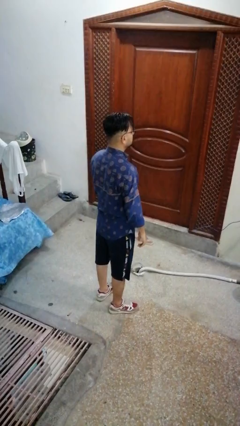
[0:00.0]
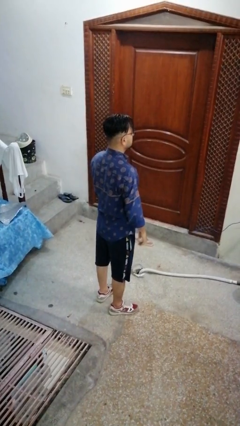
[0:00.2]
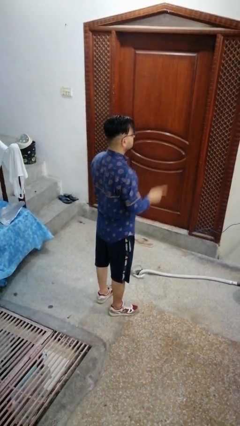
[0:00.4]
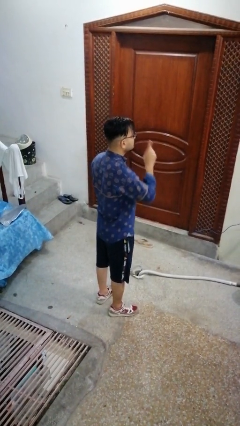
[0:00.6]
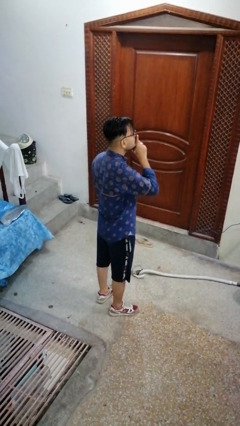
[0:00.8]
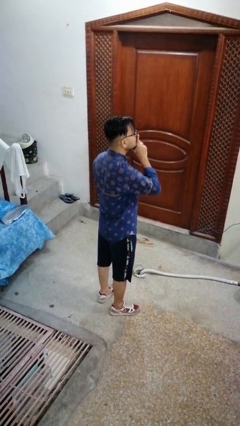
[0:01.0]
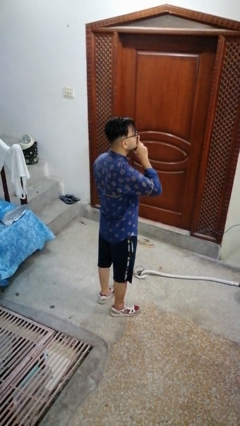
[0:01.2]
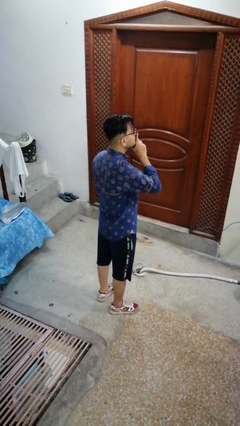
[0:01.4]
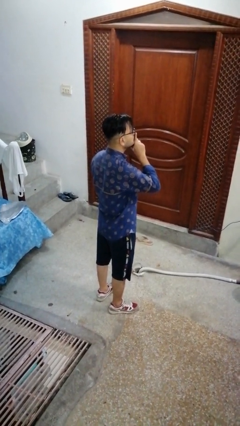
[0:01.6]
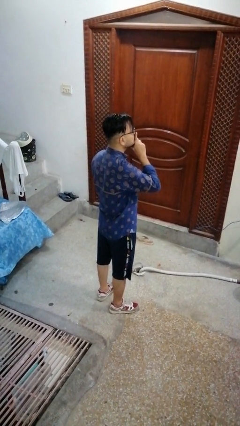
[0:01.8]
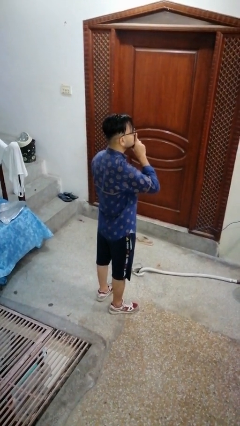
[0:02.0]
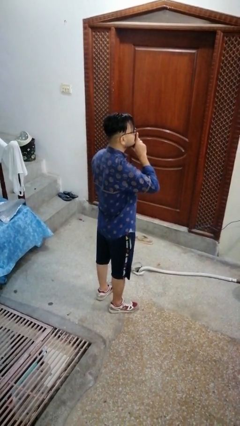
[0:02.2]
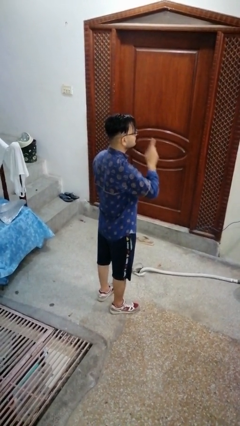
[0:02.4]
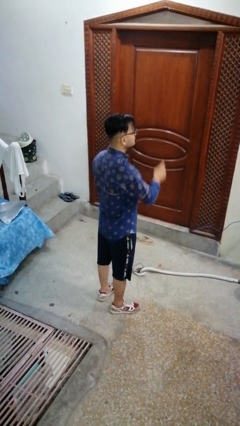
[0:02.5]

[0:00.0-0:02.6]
person gestures be quiet

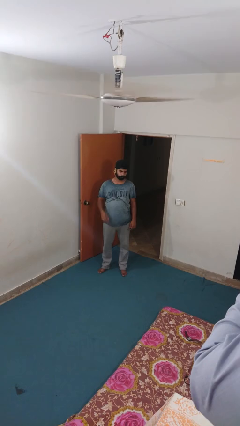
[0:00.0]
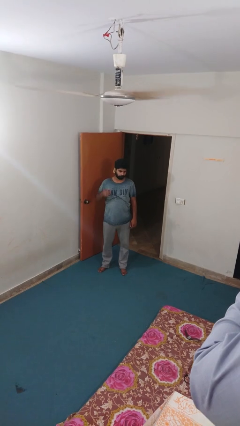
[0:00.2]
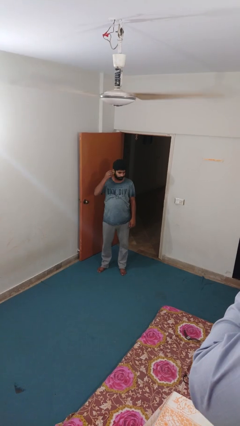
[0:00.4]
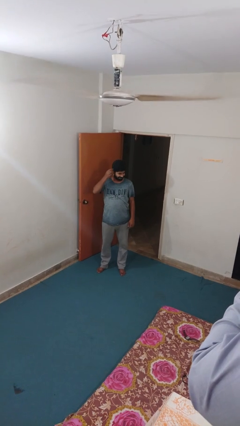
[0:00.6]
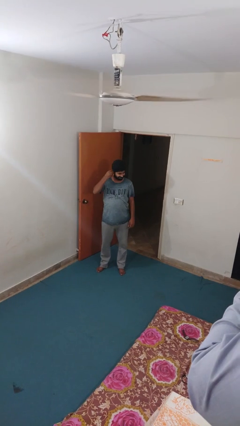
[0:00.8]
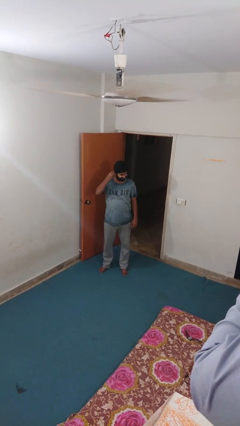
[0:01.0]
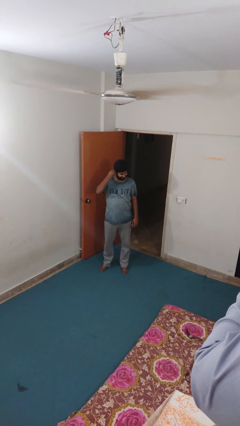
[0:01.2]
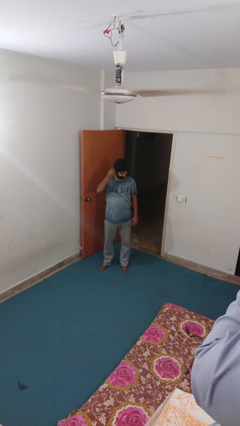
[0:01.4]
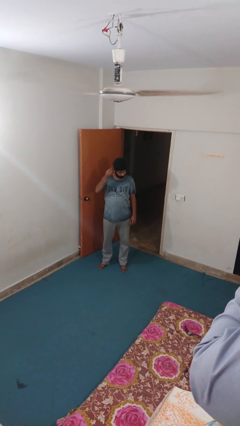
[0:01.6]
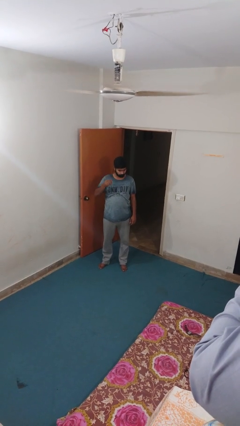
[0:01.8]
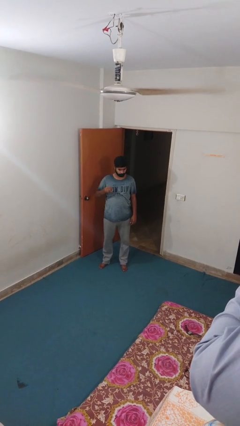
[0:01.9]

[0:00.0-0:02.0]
person takes off earrings

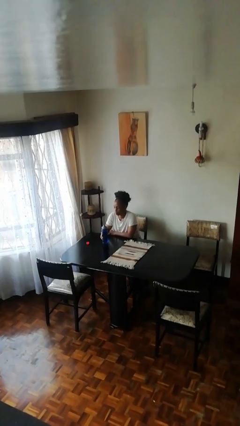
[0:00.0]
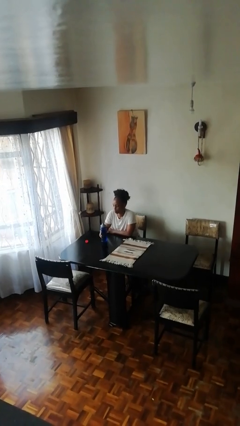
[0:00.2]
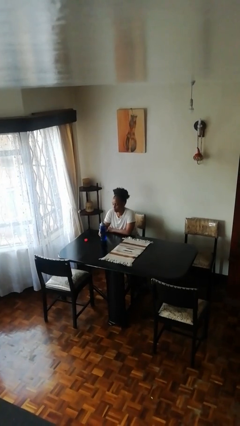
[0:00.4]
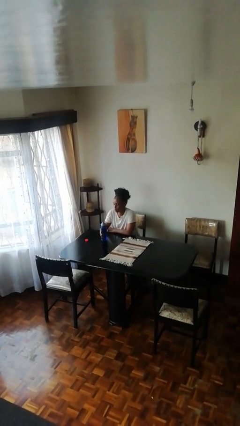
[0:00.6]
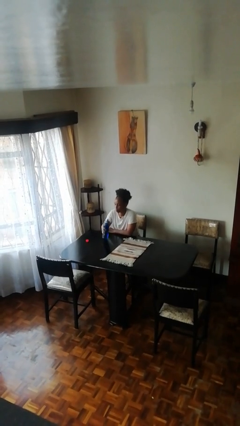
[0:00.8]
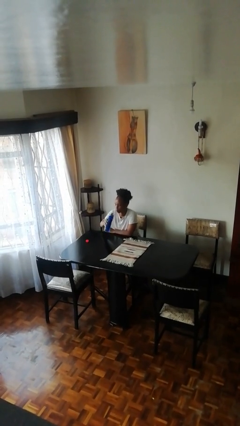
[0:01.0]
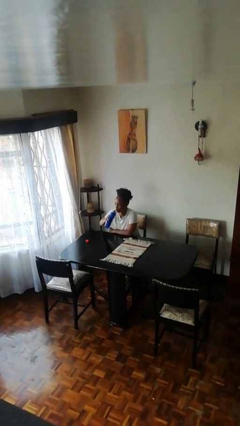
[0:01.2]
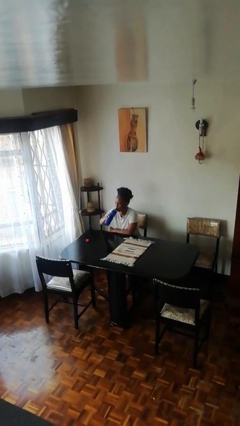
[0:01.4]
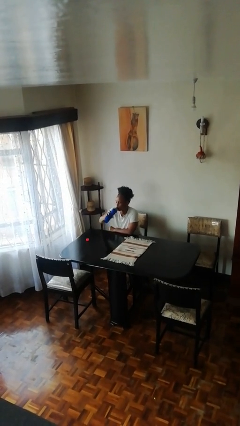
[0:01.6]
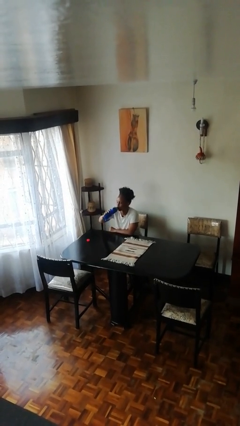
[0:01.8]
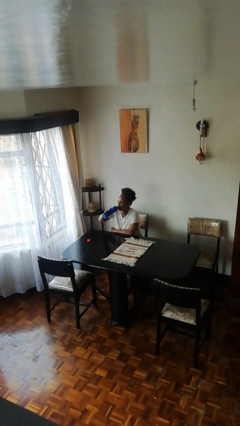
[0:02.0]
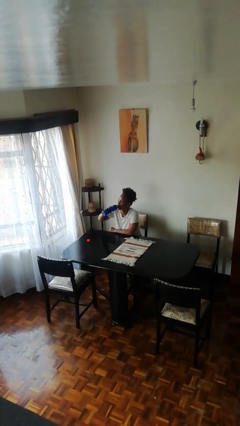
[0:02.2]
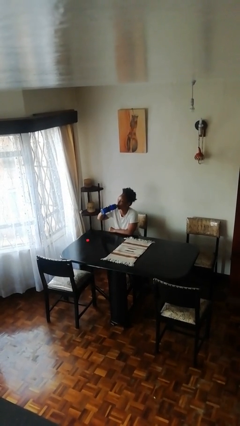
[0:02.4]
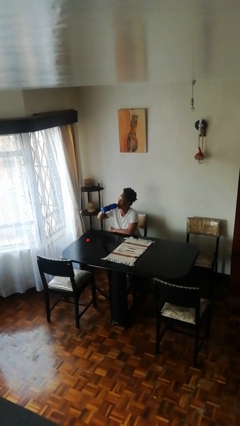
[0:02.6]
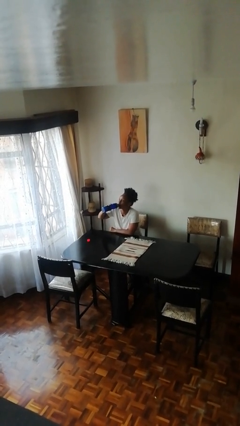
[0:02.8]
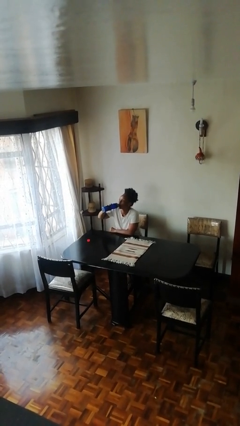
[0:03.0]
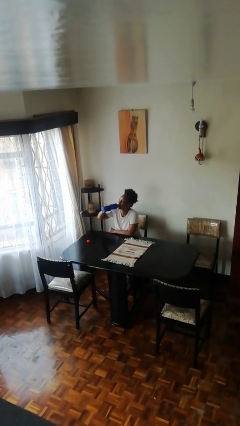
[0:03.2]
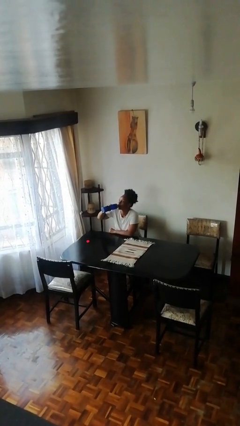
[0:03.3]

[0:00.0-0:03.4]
person drinks from bottle

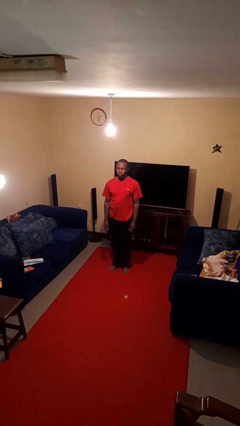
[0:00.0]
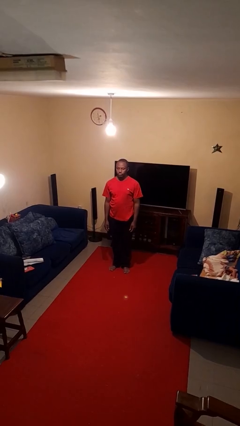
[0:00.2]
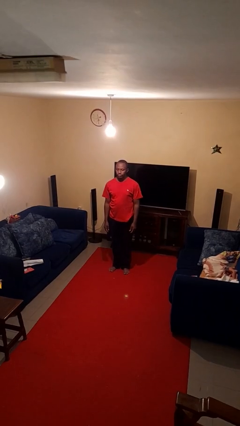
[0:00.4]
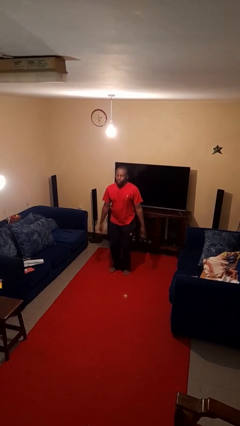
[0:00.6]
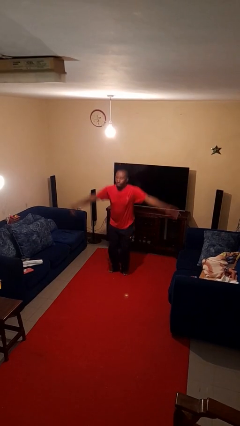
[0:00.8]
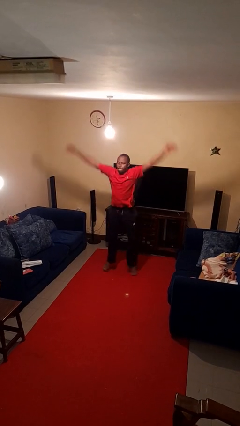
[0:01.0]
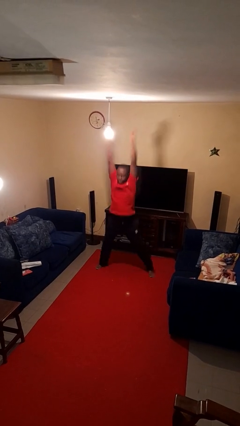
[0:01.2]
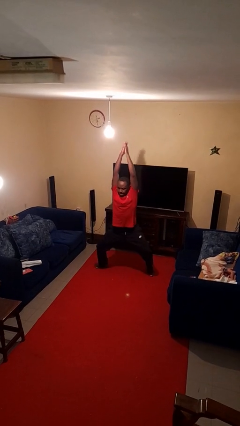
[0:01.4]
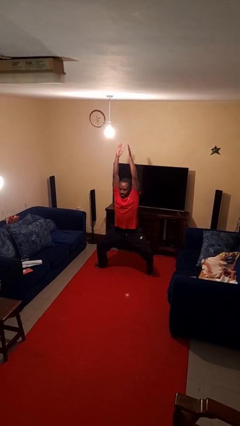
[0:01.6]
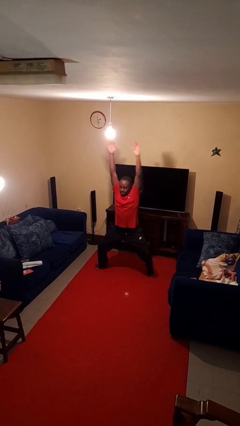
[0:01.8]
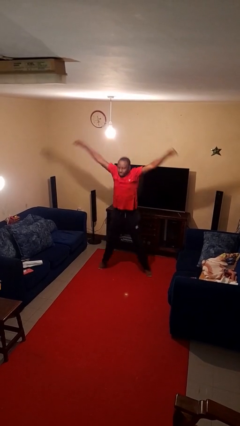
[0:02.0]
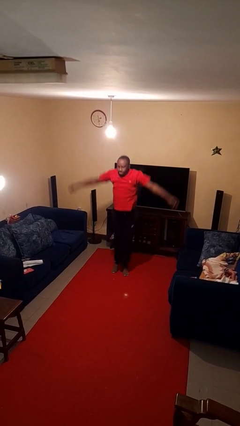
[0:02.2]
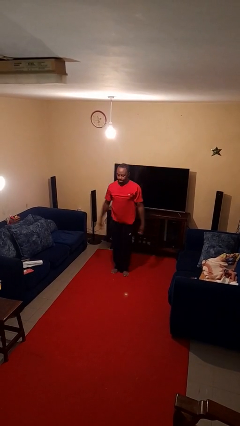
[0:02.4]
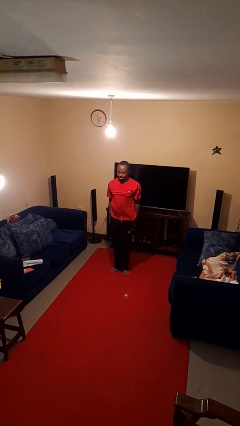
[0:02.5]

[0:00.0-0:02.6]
person exercises with jumping jacks

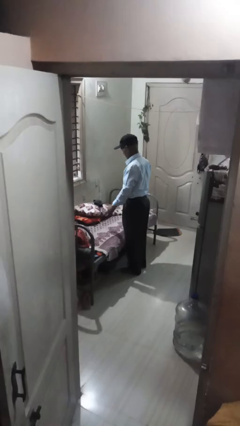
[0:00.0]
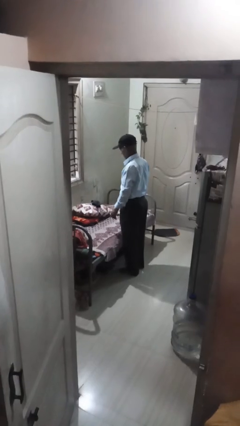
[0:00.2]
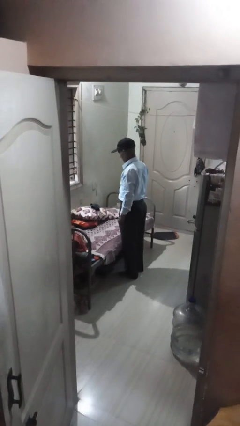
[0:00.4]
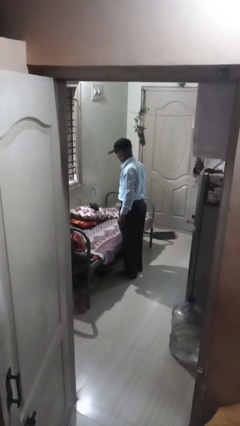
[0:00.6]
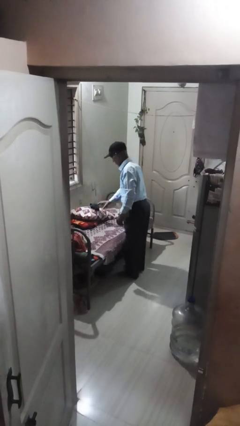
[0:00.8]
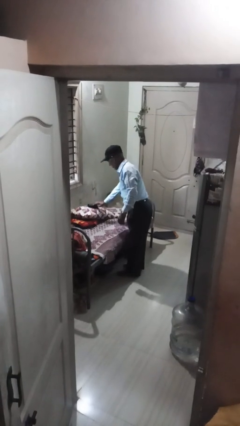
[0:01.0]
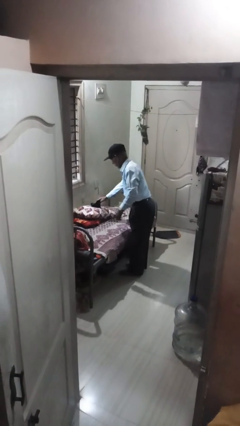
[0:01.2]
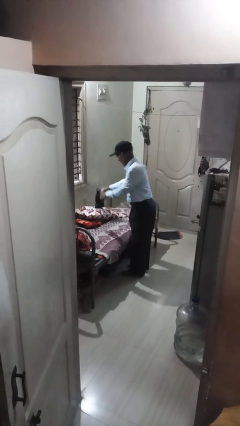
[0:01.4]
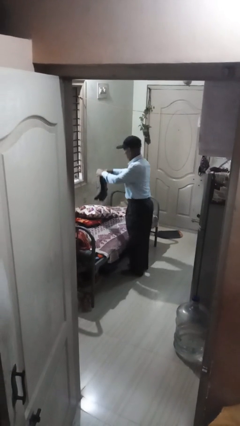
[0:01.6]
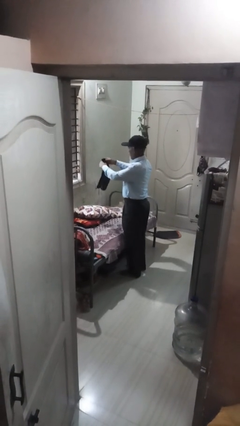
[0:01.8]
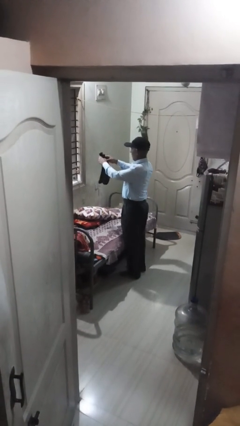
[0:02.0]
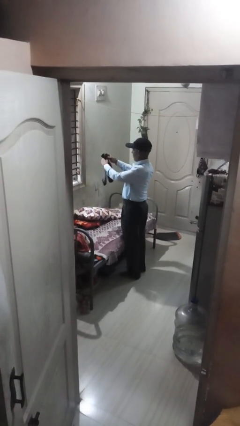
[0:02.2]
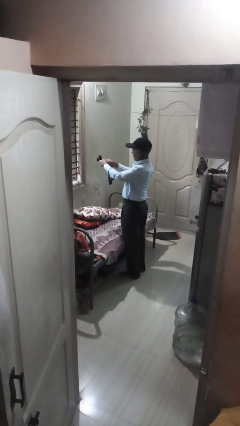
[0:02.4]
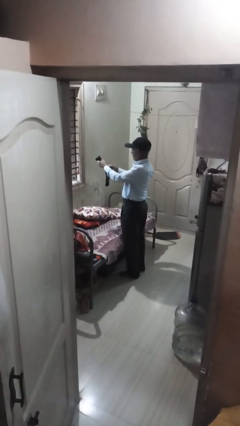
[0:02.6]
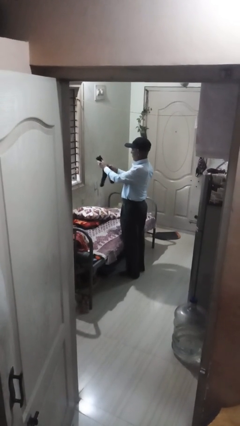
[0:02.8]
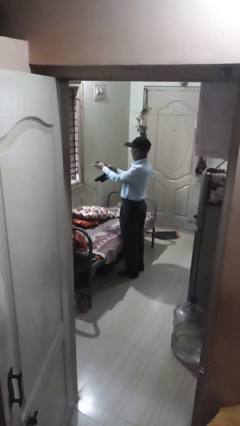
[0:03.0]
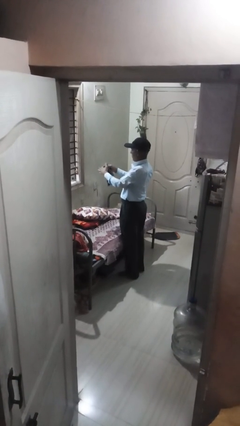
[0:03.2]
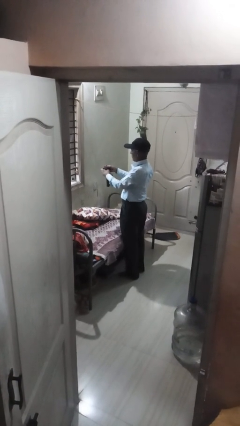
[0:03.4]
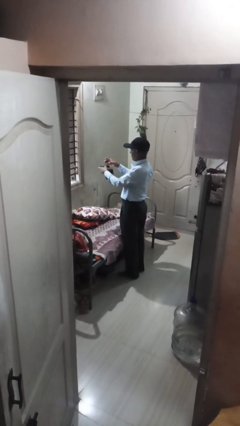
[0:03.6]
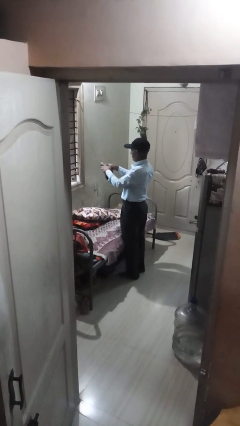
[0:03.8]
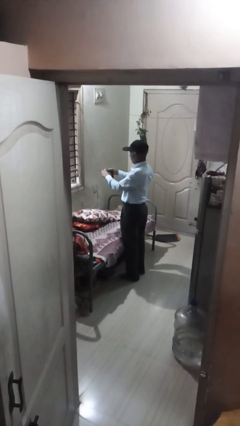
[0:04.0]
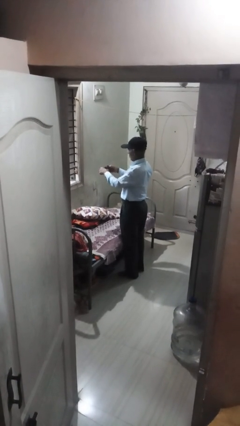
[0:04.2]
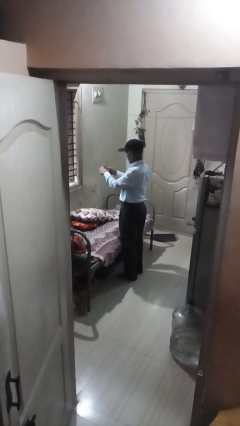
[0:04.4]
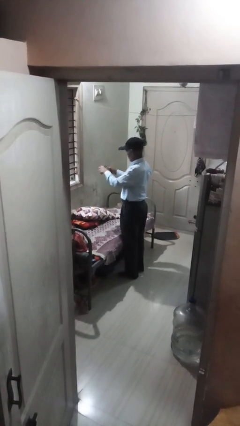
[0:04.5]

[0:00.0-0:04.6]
person folds socks

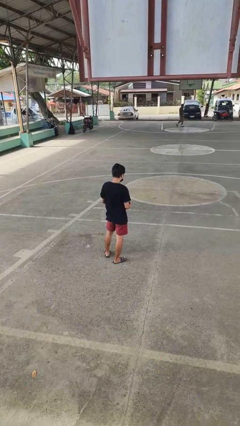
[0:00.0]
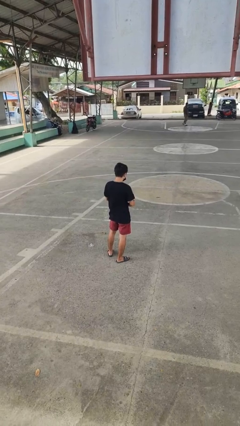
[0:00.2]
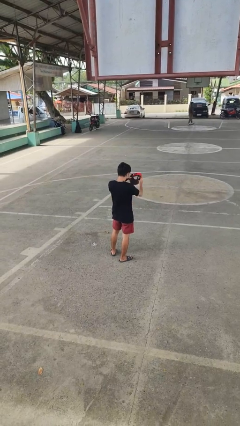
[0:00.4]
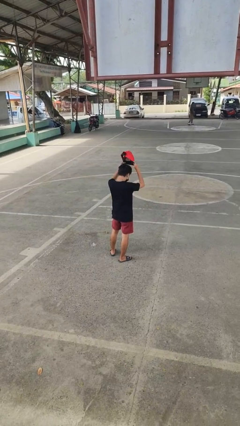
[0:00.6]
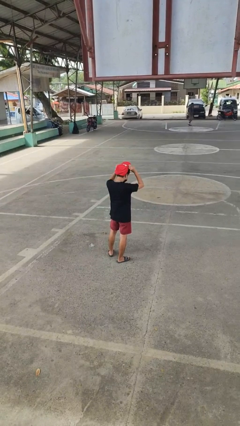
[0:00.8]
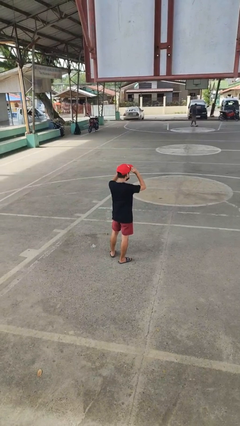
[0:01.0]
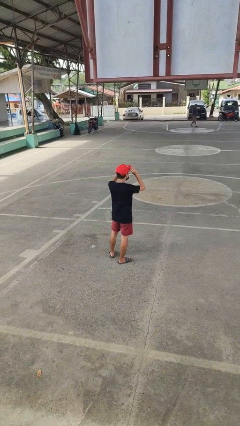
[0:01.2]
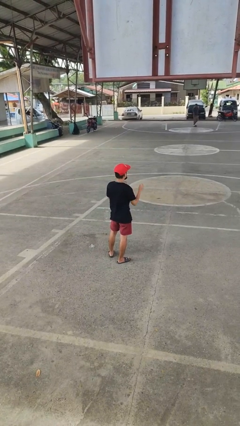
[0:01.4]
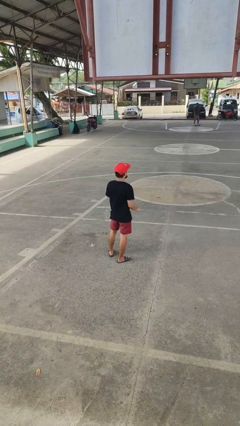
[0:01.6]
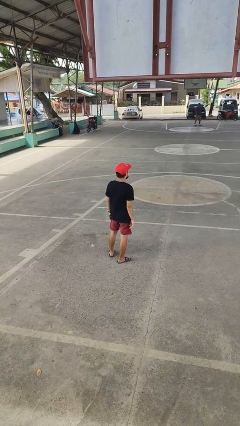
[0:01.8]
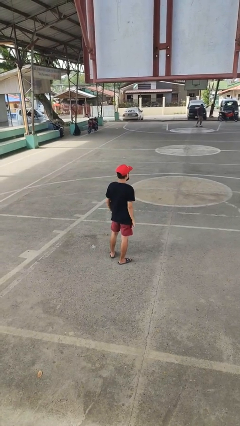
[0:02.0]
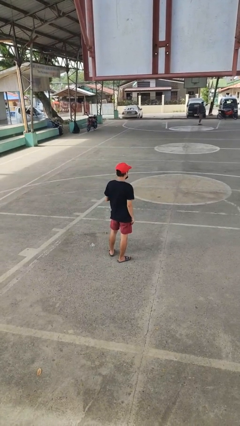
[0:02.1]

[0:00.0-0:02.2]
person puts on hat

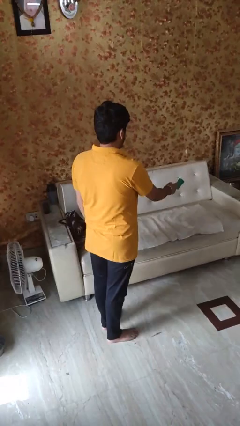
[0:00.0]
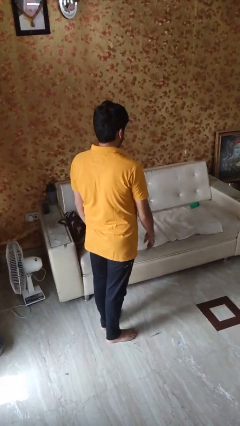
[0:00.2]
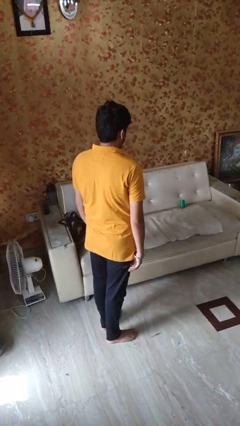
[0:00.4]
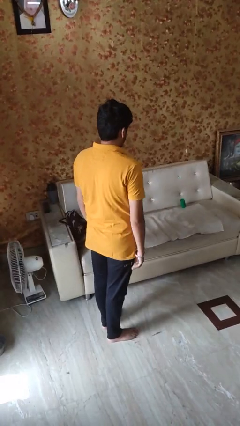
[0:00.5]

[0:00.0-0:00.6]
person throws object on bed
